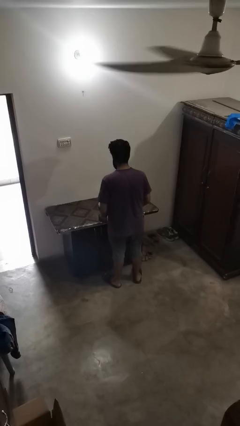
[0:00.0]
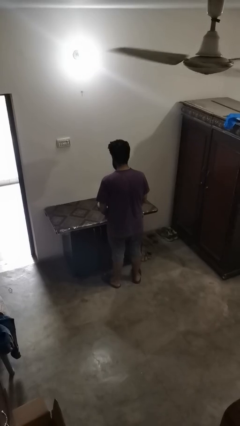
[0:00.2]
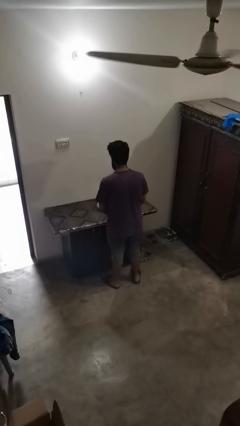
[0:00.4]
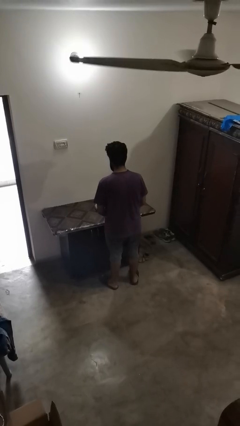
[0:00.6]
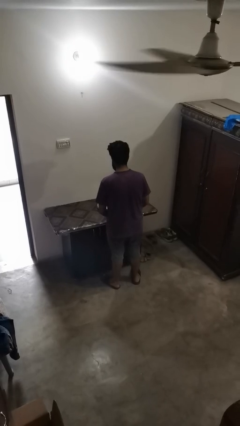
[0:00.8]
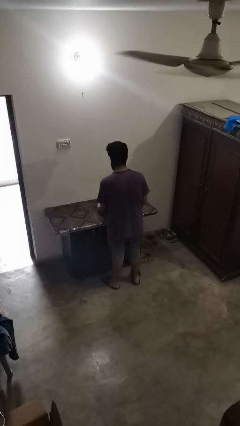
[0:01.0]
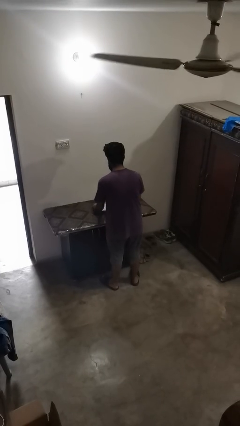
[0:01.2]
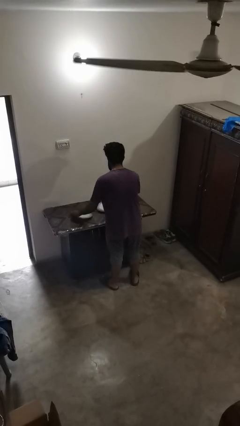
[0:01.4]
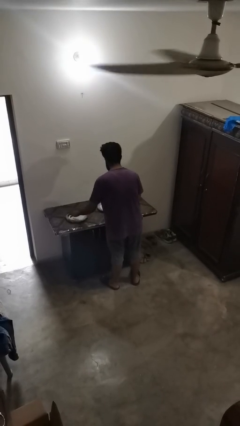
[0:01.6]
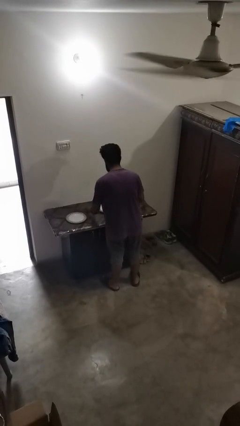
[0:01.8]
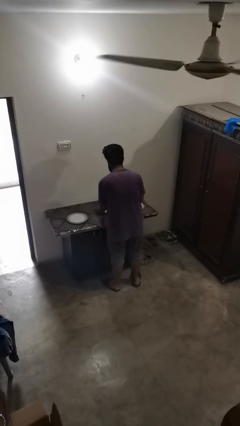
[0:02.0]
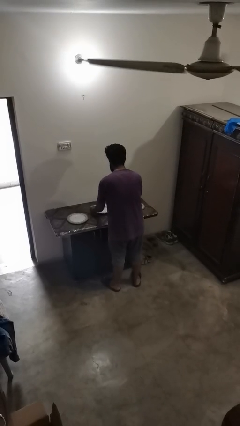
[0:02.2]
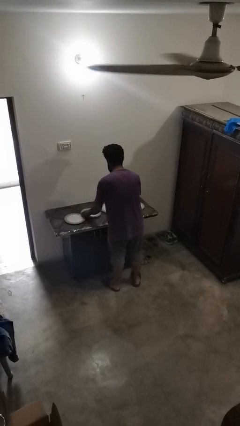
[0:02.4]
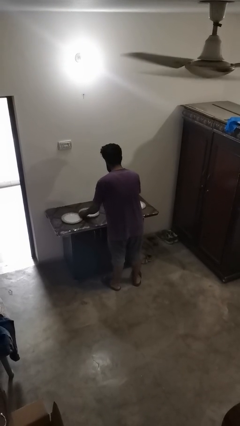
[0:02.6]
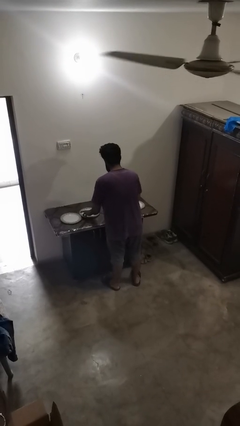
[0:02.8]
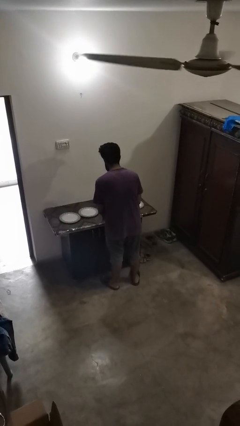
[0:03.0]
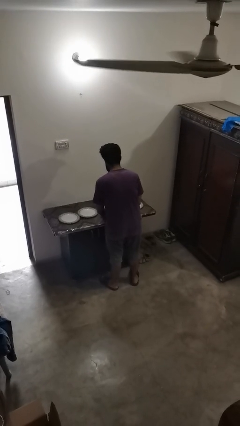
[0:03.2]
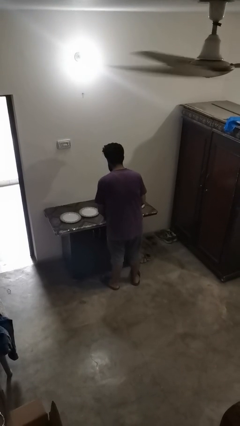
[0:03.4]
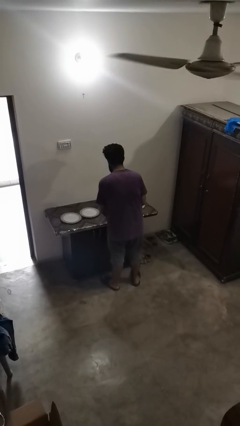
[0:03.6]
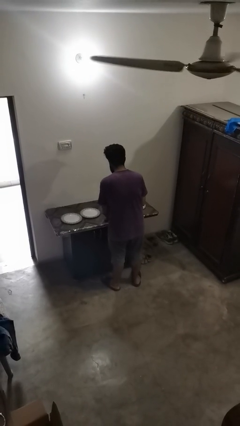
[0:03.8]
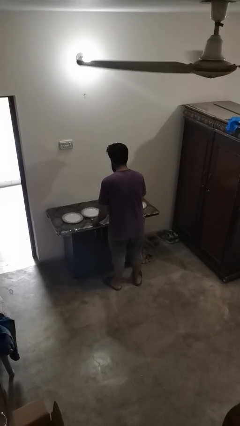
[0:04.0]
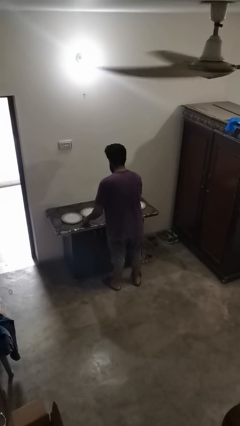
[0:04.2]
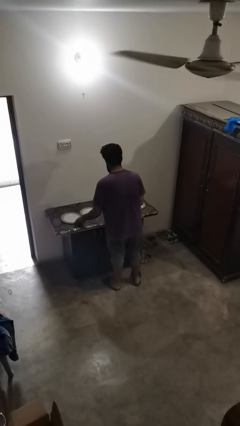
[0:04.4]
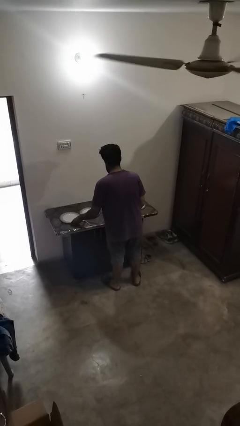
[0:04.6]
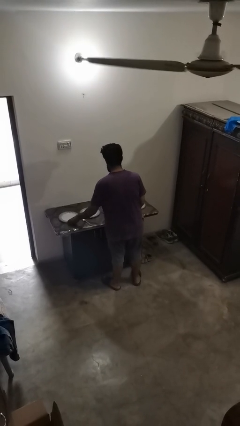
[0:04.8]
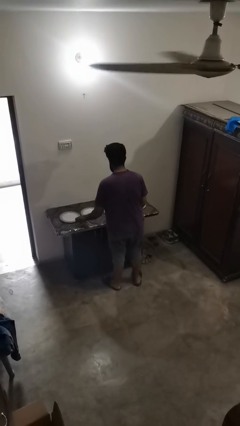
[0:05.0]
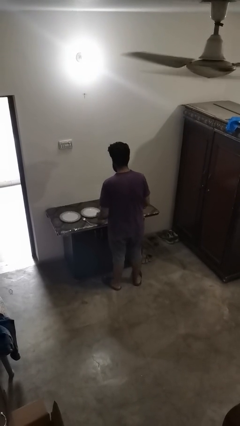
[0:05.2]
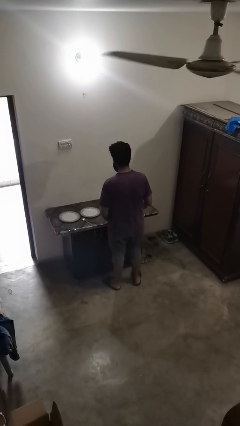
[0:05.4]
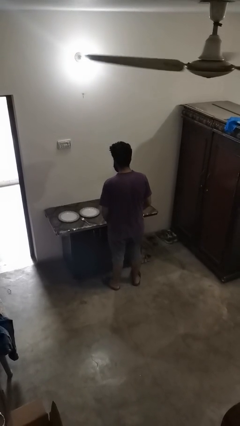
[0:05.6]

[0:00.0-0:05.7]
person sets table

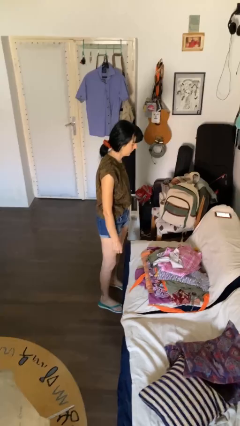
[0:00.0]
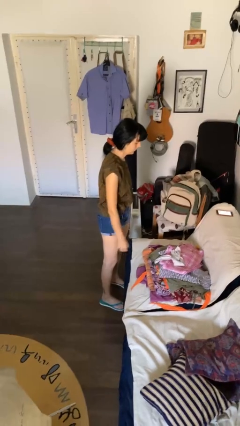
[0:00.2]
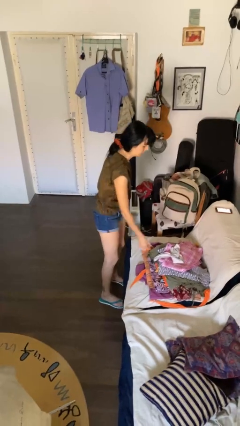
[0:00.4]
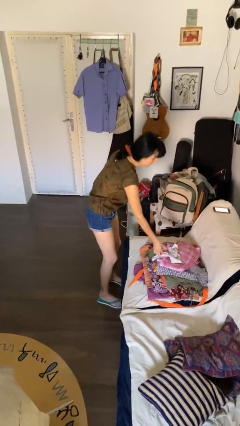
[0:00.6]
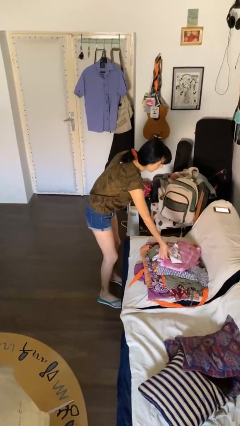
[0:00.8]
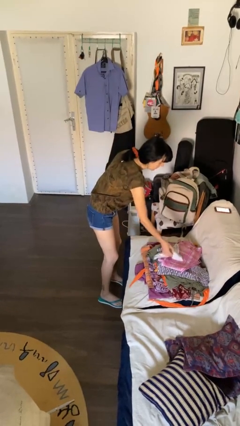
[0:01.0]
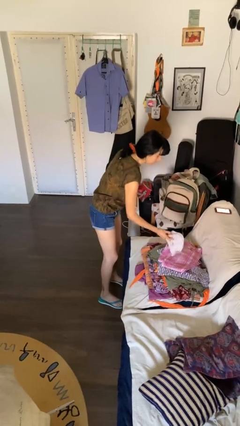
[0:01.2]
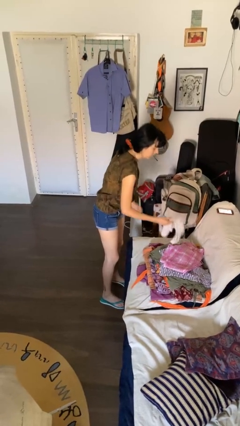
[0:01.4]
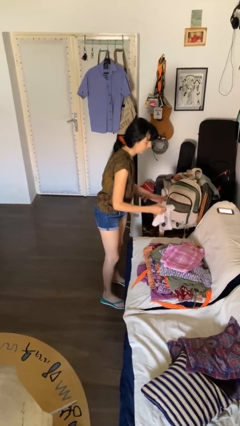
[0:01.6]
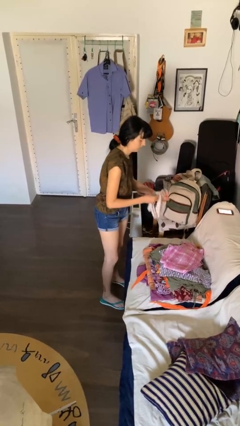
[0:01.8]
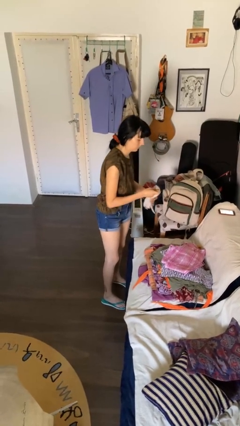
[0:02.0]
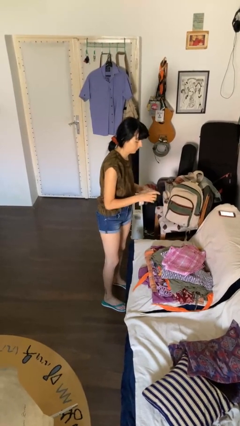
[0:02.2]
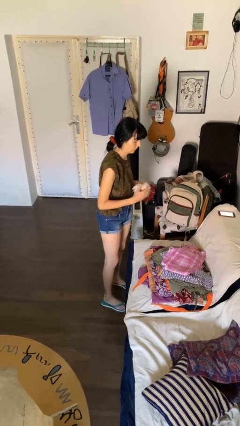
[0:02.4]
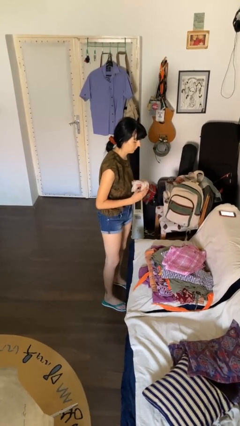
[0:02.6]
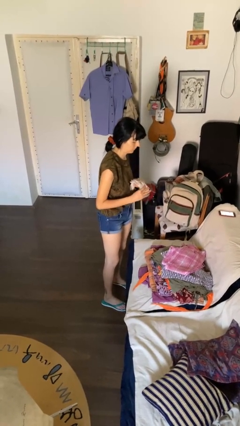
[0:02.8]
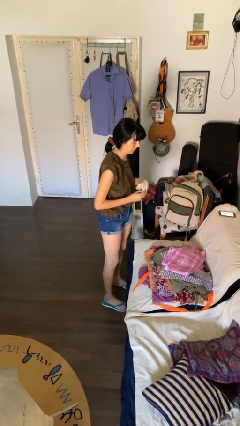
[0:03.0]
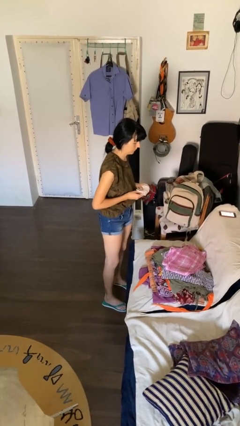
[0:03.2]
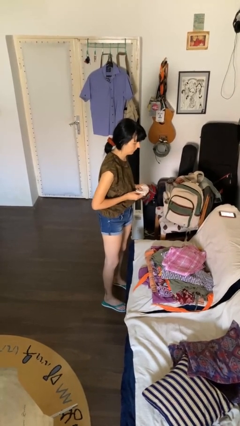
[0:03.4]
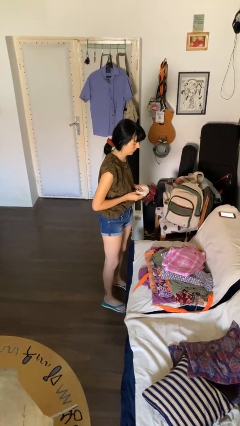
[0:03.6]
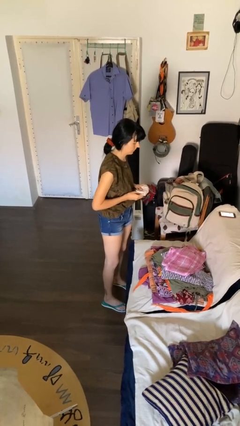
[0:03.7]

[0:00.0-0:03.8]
person folds socks

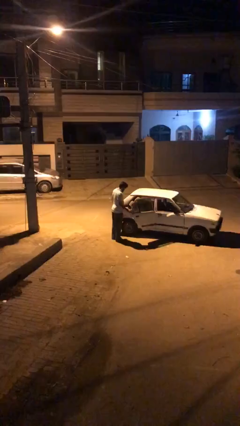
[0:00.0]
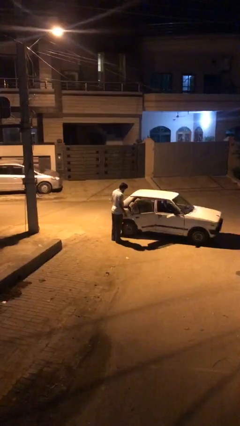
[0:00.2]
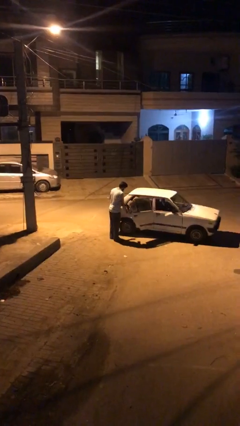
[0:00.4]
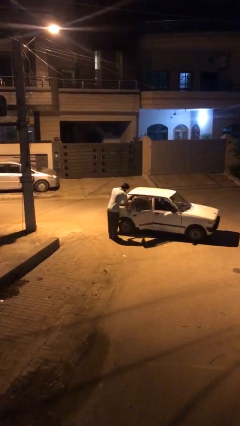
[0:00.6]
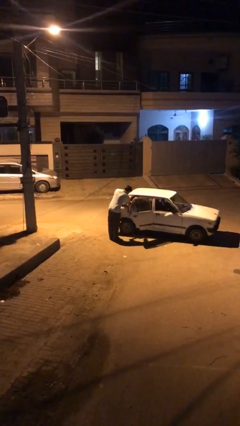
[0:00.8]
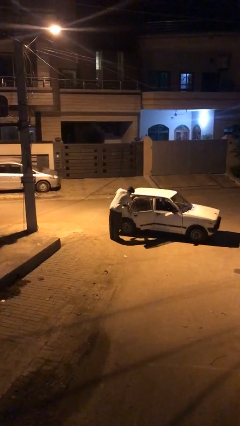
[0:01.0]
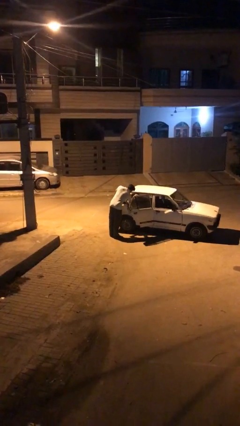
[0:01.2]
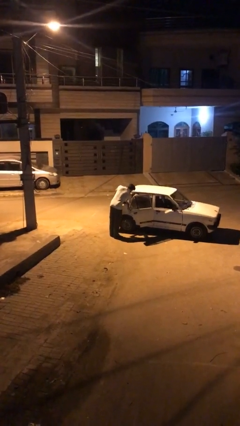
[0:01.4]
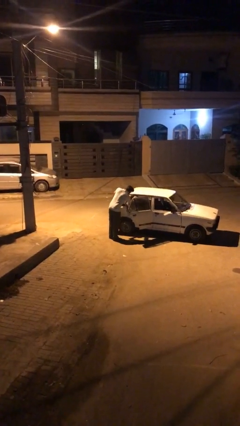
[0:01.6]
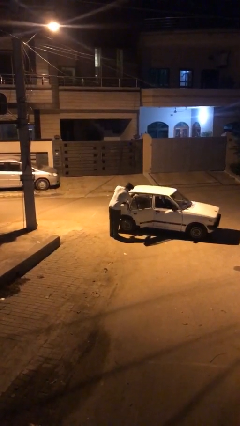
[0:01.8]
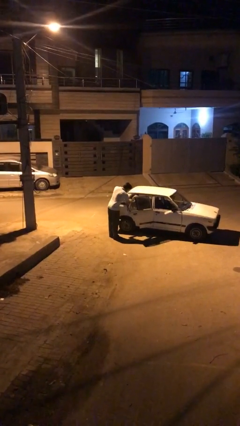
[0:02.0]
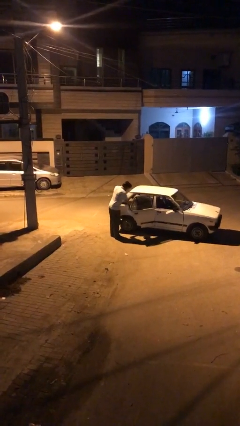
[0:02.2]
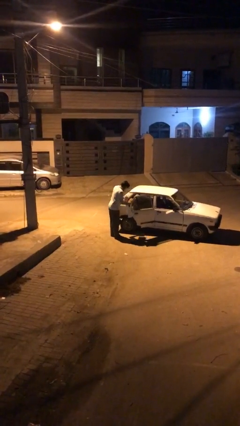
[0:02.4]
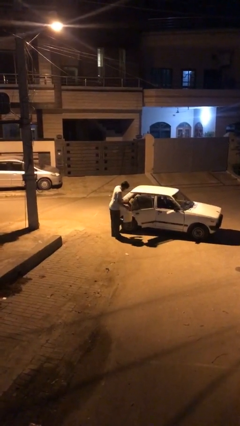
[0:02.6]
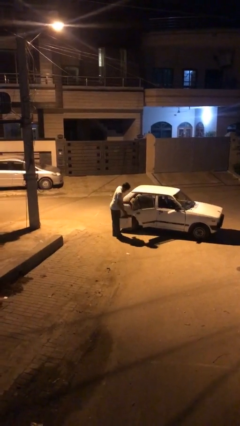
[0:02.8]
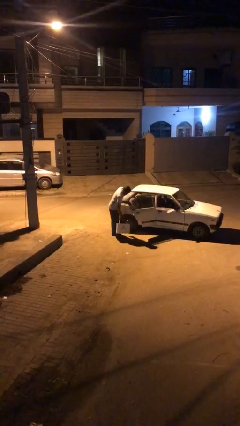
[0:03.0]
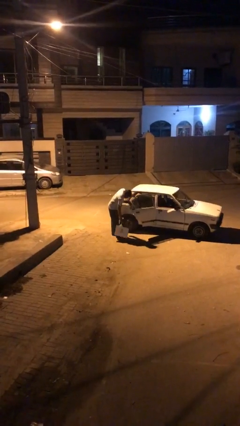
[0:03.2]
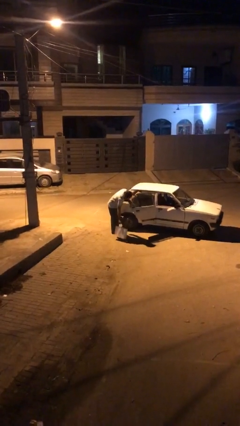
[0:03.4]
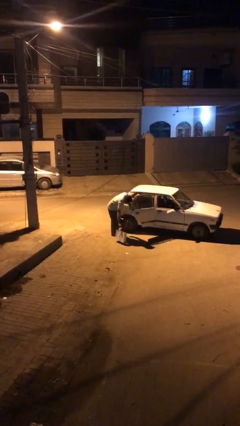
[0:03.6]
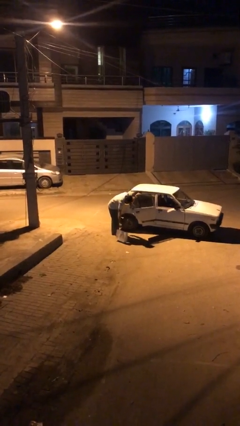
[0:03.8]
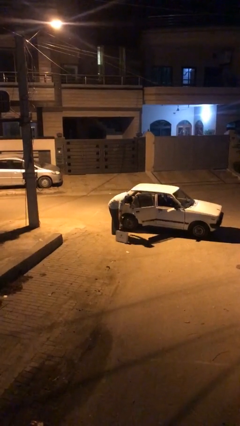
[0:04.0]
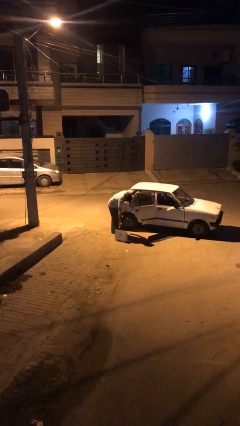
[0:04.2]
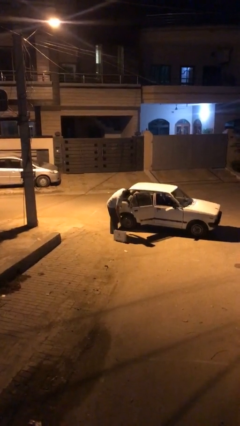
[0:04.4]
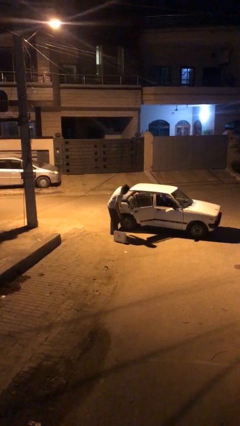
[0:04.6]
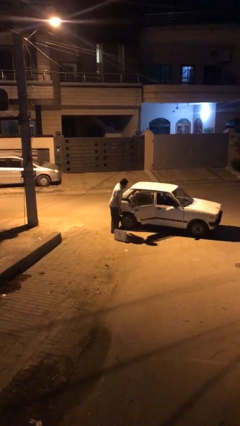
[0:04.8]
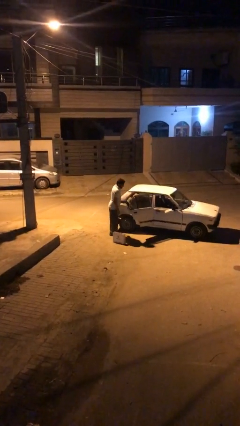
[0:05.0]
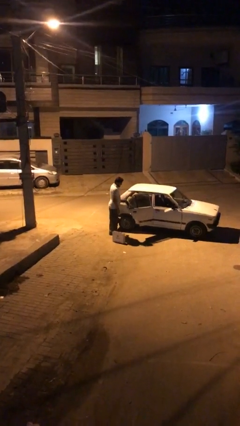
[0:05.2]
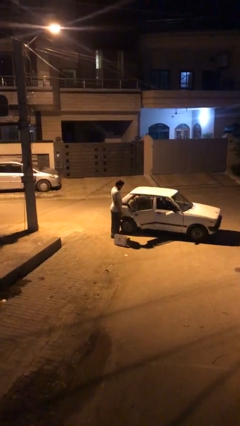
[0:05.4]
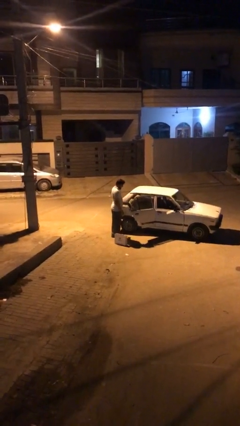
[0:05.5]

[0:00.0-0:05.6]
person unloads car

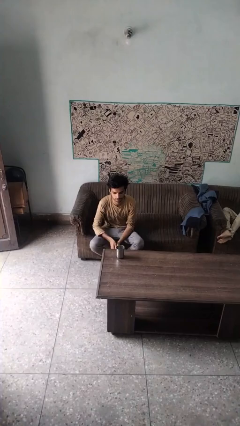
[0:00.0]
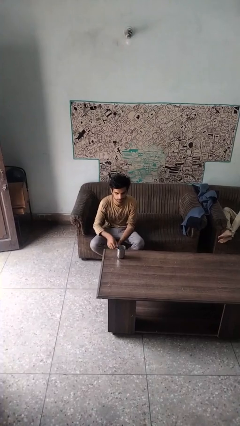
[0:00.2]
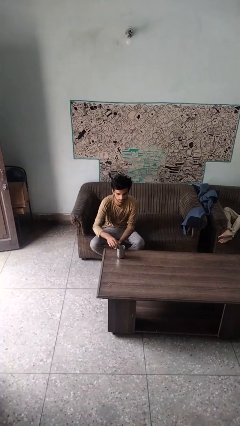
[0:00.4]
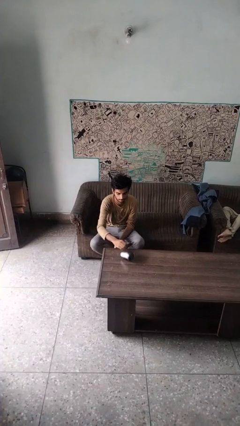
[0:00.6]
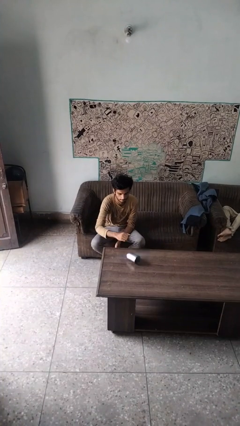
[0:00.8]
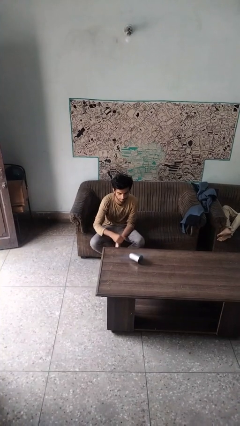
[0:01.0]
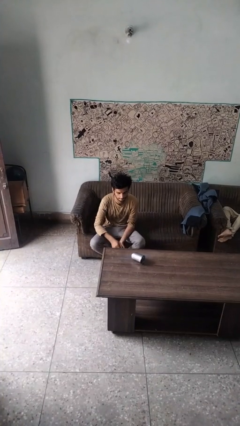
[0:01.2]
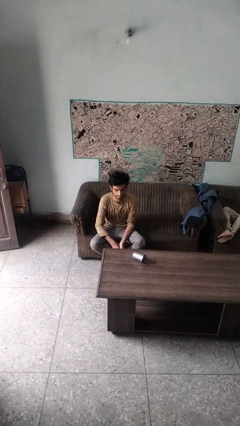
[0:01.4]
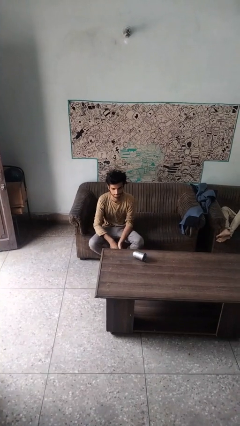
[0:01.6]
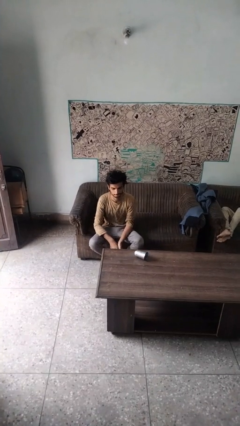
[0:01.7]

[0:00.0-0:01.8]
person knocks over glass

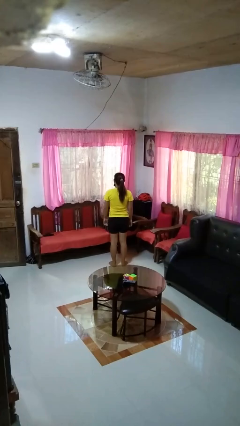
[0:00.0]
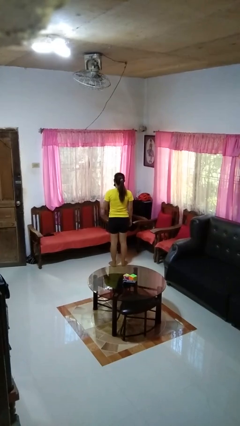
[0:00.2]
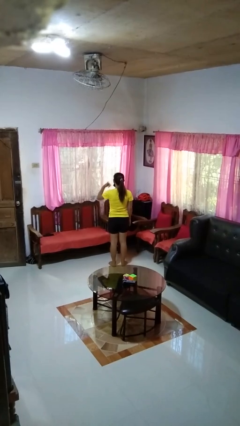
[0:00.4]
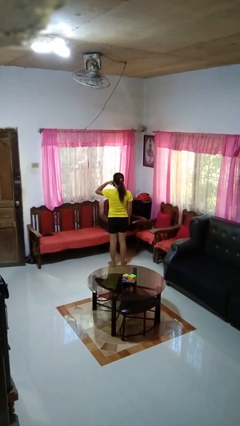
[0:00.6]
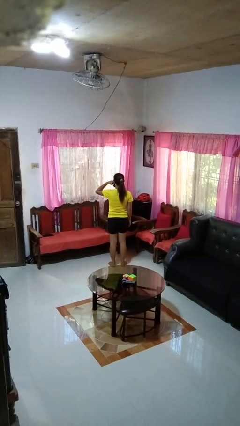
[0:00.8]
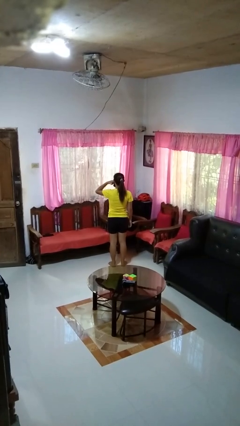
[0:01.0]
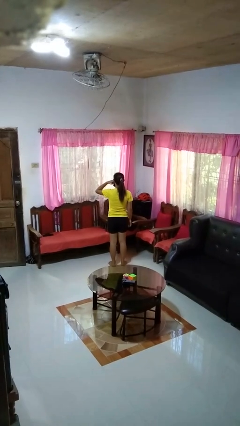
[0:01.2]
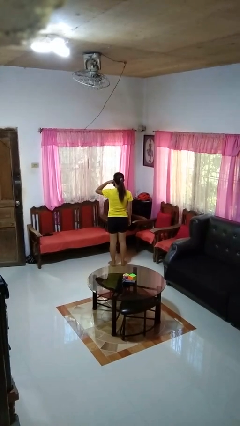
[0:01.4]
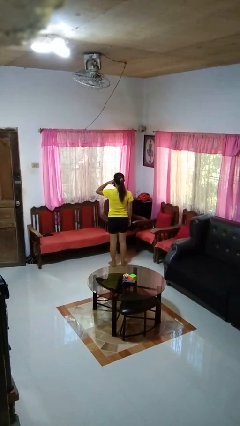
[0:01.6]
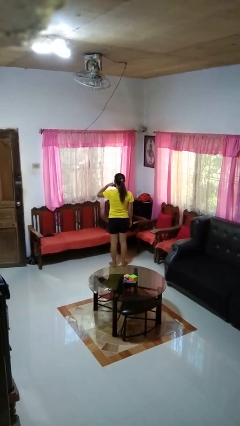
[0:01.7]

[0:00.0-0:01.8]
person gestures call me
